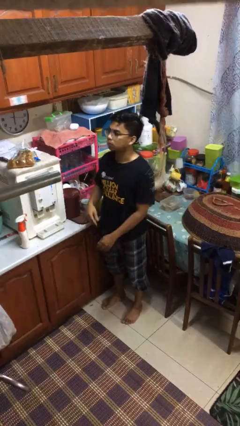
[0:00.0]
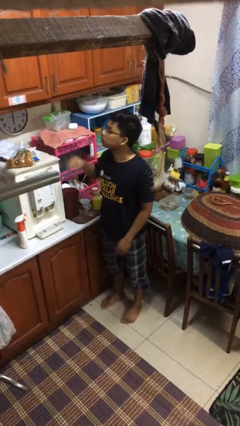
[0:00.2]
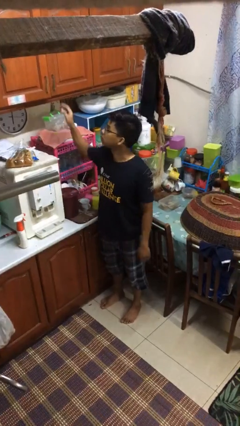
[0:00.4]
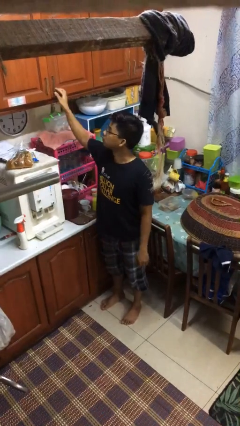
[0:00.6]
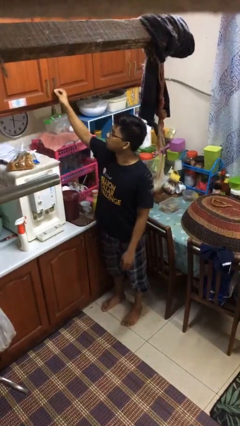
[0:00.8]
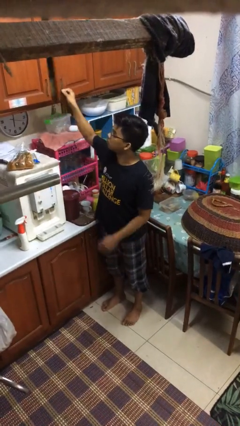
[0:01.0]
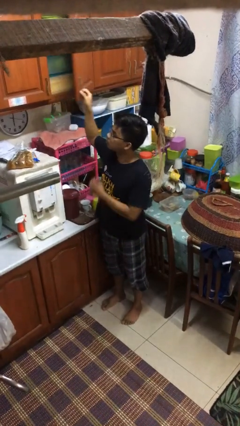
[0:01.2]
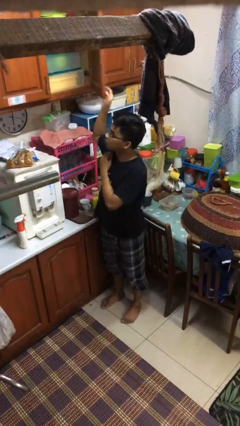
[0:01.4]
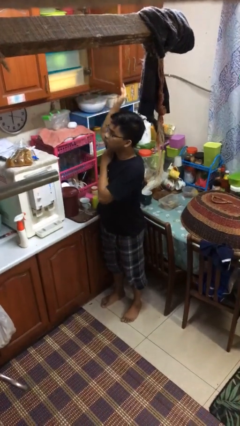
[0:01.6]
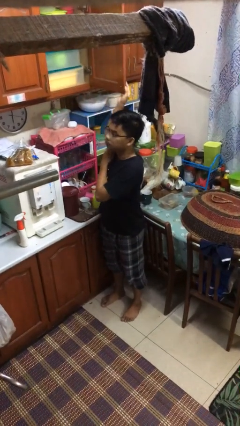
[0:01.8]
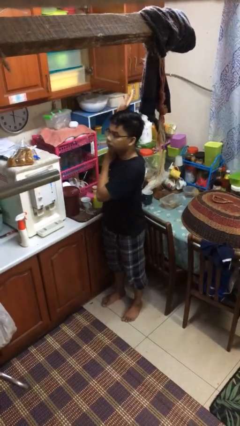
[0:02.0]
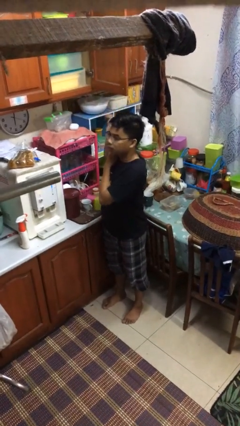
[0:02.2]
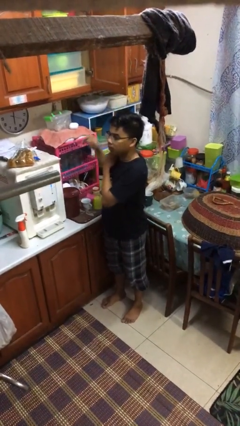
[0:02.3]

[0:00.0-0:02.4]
person opens kitchen drawer

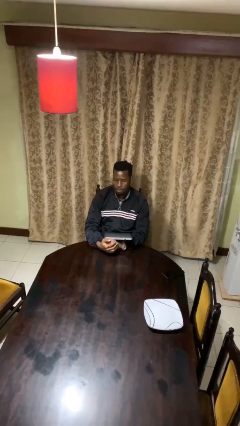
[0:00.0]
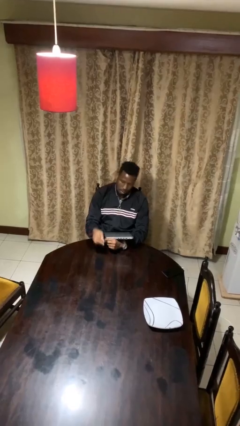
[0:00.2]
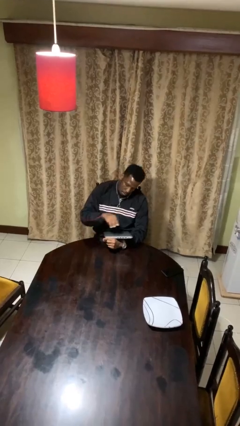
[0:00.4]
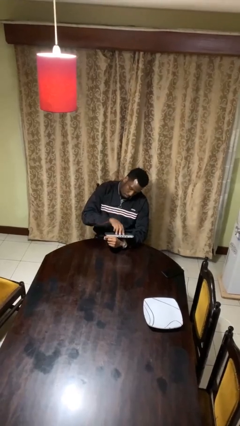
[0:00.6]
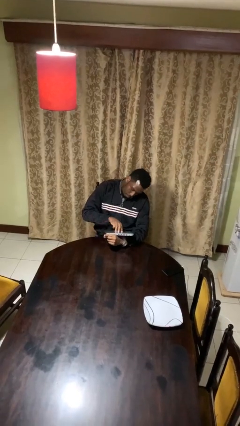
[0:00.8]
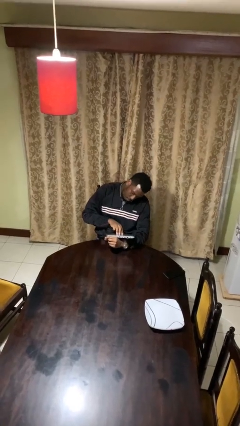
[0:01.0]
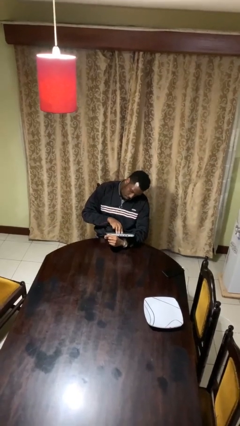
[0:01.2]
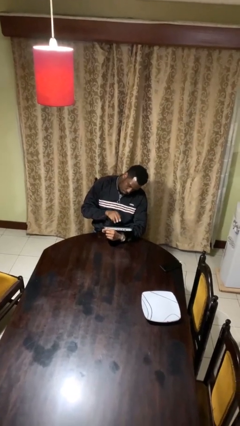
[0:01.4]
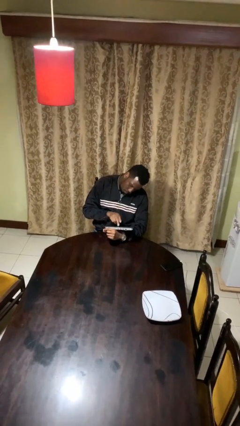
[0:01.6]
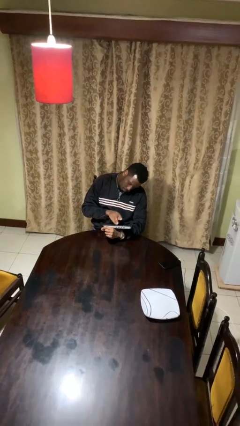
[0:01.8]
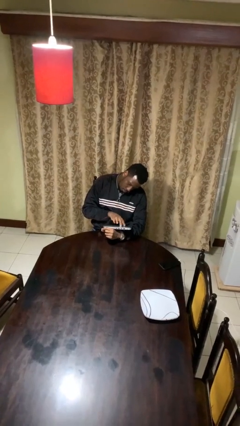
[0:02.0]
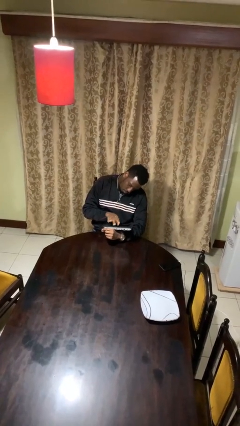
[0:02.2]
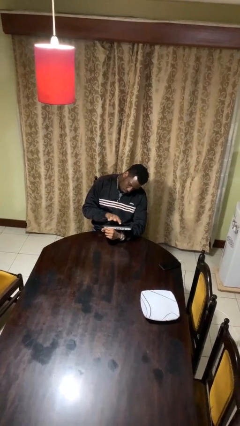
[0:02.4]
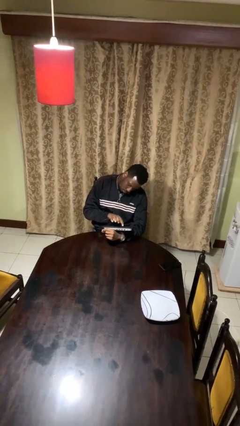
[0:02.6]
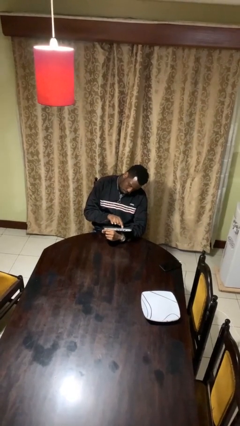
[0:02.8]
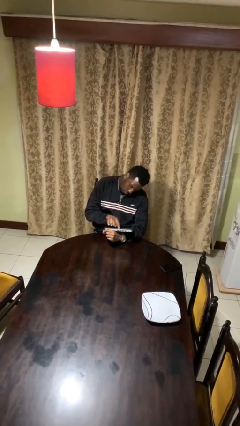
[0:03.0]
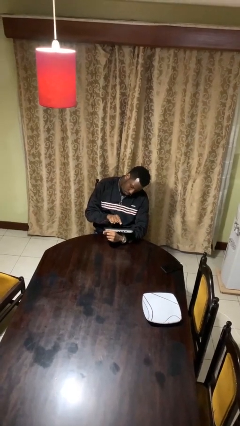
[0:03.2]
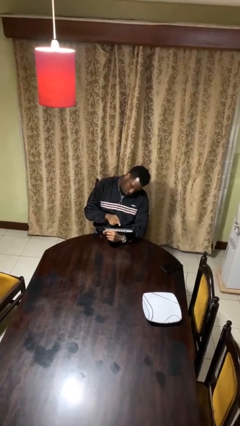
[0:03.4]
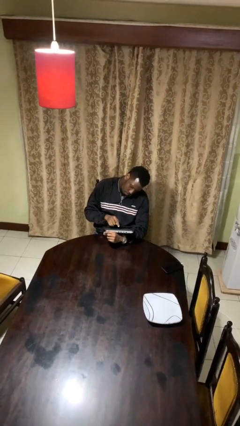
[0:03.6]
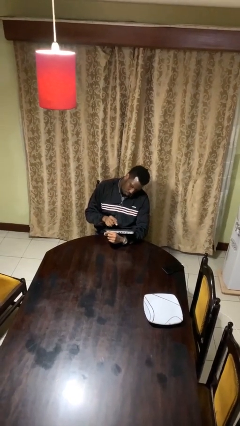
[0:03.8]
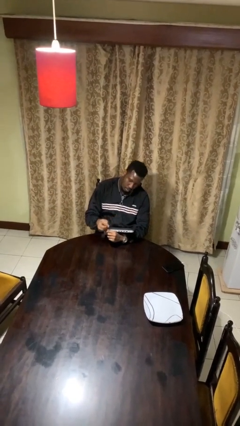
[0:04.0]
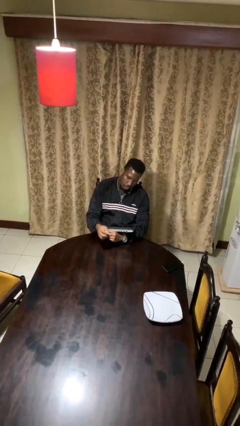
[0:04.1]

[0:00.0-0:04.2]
person interacts with tablet

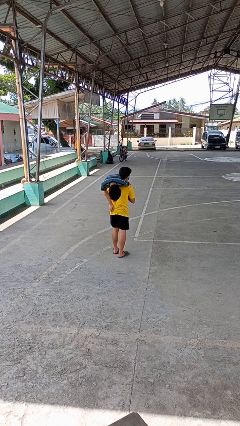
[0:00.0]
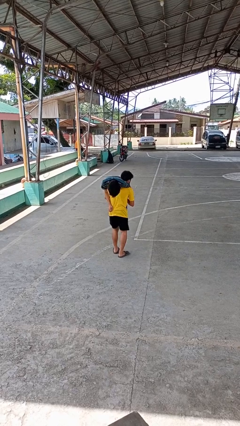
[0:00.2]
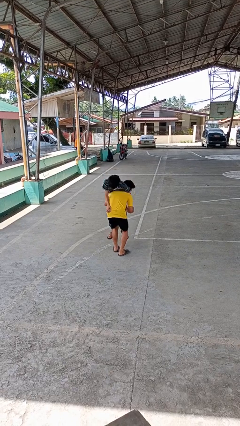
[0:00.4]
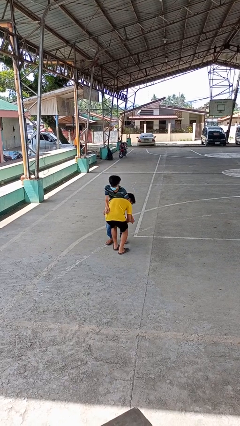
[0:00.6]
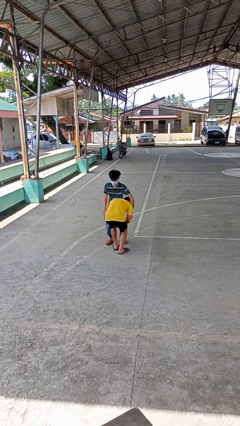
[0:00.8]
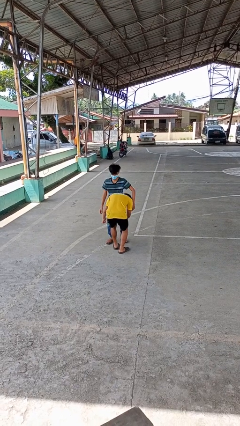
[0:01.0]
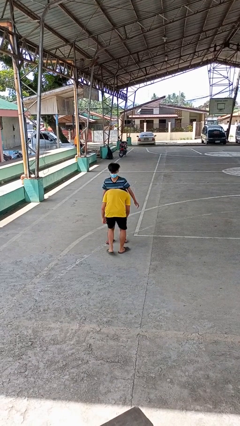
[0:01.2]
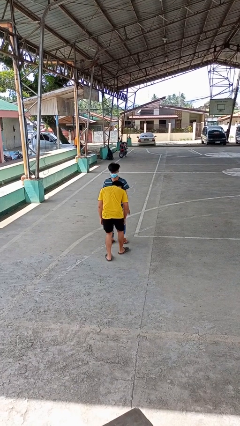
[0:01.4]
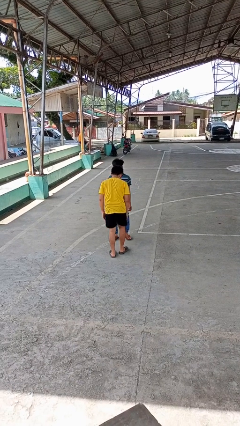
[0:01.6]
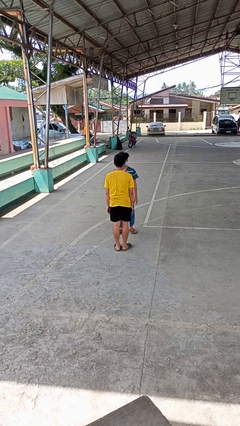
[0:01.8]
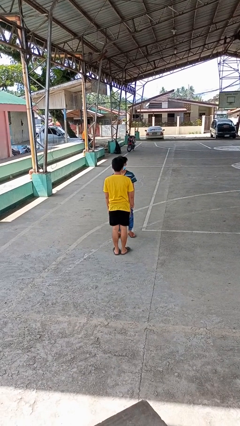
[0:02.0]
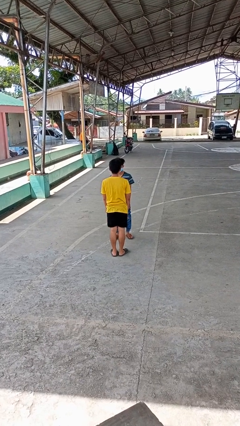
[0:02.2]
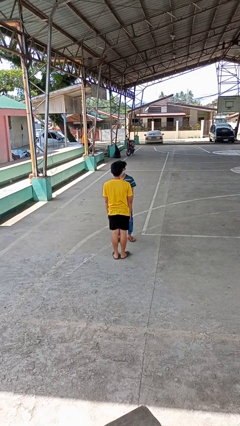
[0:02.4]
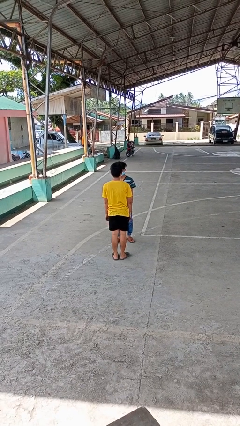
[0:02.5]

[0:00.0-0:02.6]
person puts down person

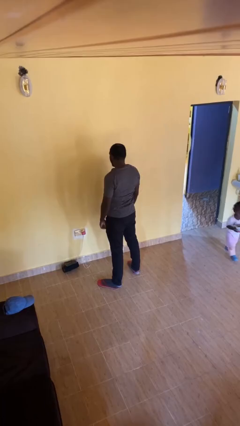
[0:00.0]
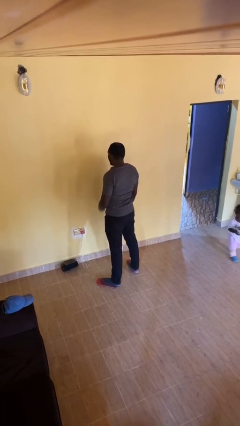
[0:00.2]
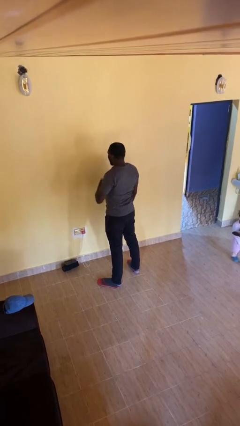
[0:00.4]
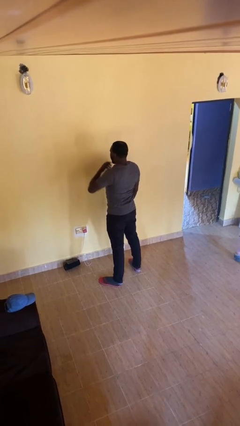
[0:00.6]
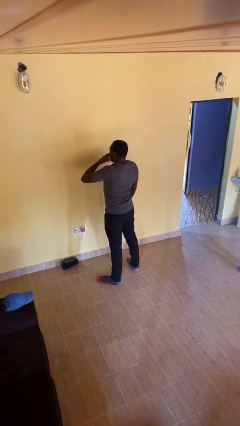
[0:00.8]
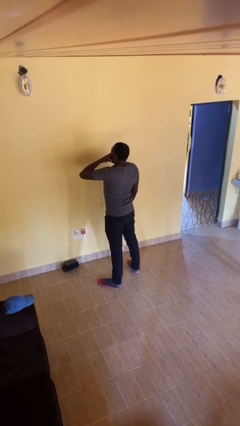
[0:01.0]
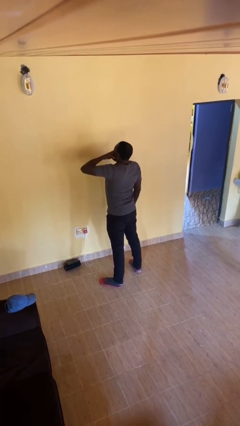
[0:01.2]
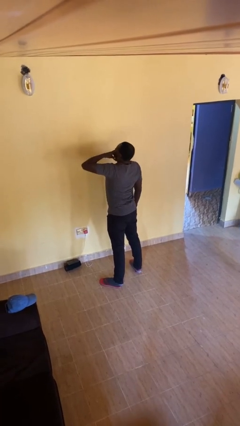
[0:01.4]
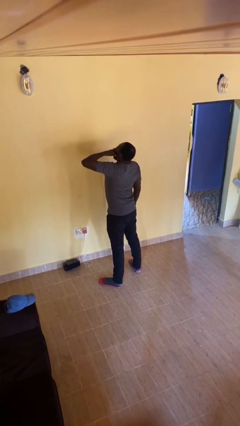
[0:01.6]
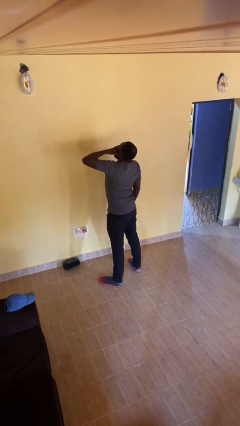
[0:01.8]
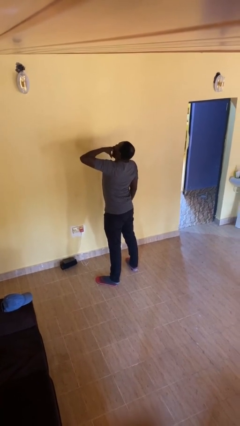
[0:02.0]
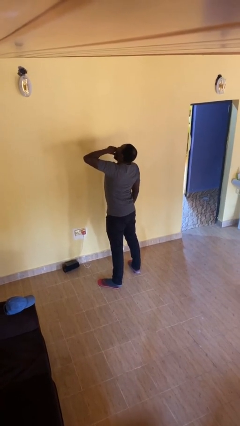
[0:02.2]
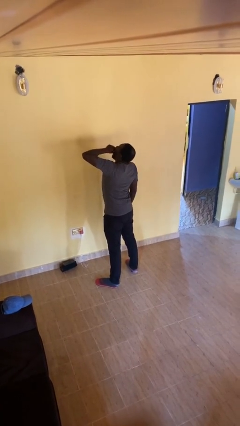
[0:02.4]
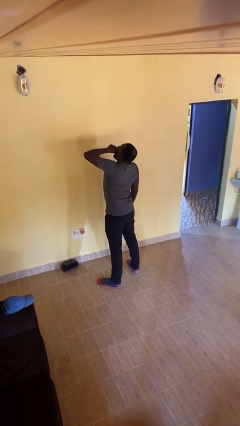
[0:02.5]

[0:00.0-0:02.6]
person yawns

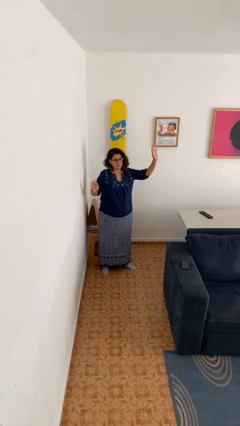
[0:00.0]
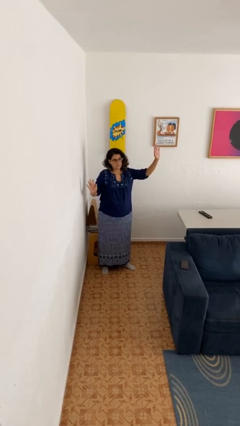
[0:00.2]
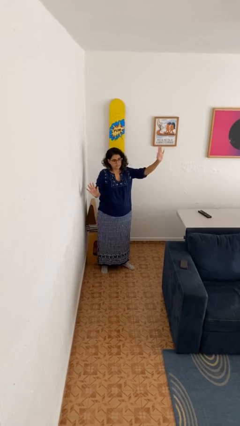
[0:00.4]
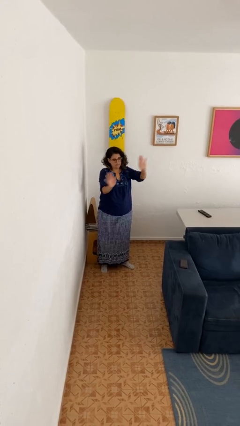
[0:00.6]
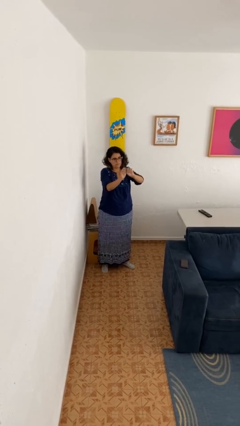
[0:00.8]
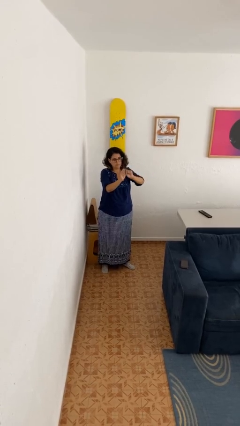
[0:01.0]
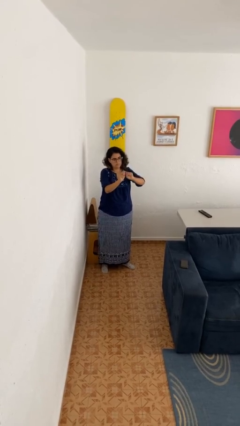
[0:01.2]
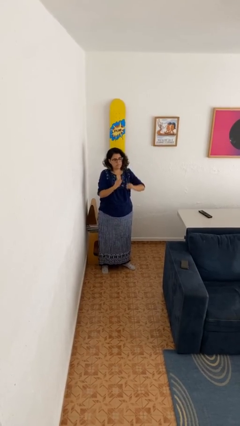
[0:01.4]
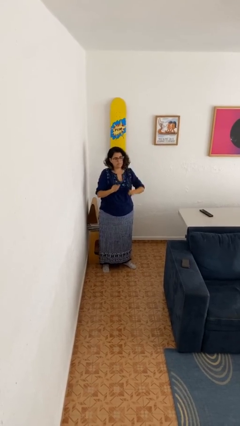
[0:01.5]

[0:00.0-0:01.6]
person gestures zoom out

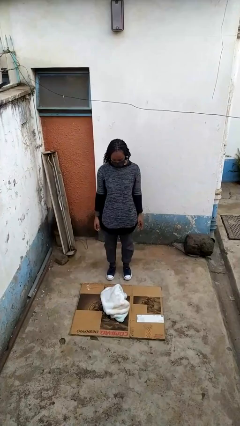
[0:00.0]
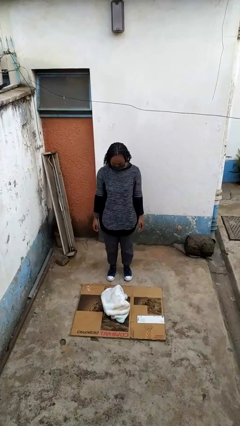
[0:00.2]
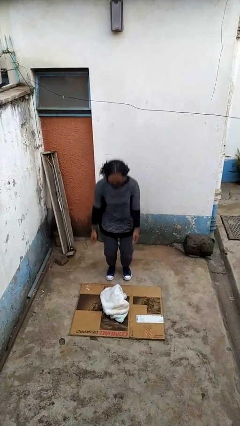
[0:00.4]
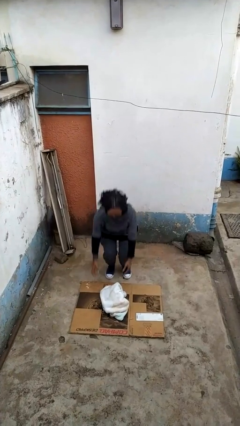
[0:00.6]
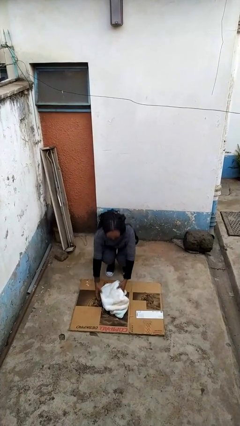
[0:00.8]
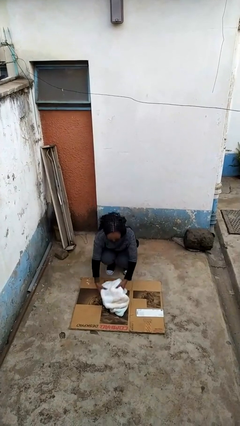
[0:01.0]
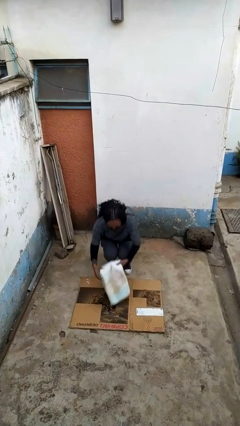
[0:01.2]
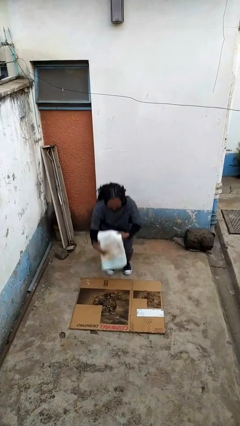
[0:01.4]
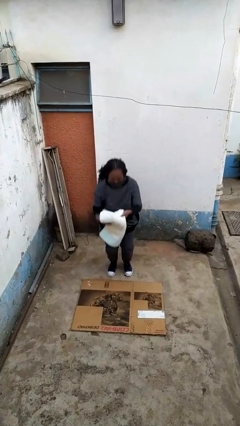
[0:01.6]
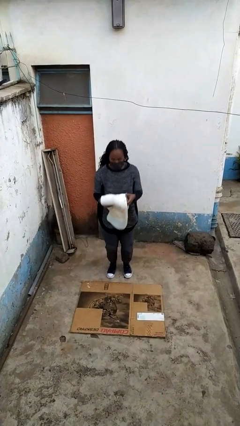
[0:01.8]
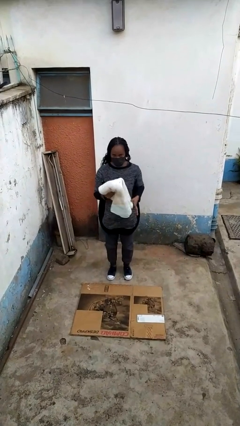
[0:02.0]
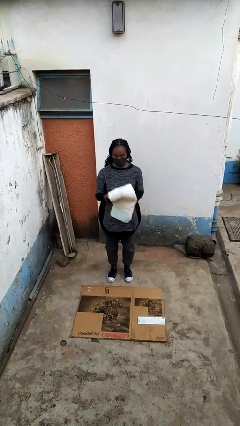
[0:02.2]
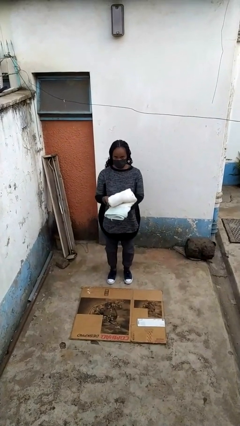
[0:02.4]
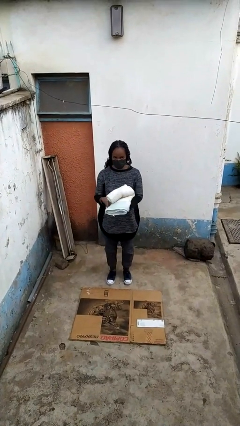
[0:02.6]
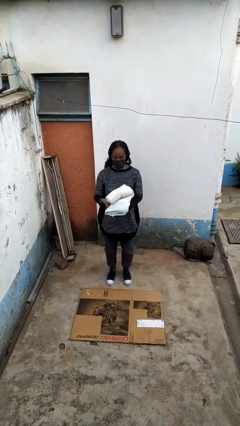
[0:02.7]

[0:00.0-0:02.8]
person picks up object from floor

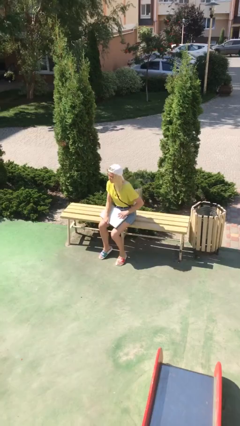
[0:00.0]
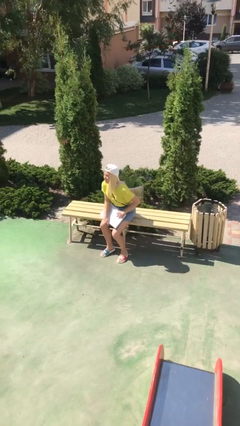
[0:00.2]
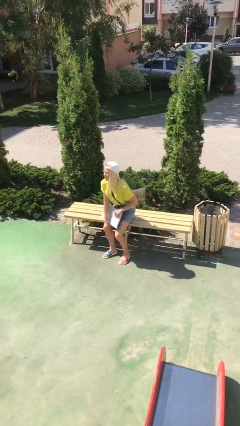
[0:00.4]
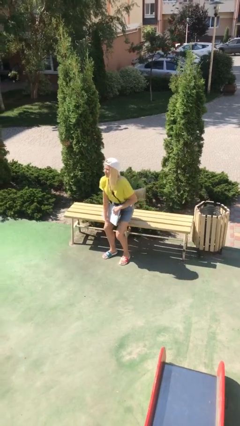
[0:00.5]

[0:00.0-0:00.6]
person stands up
